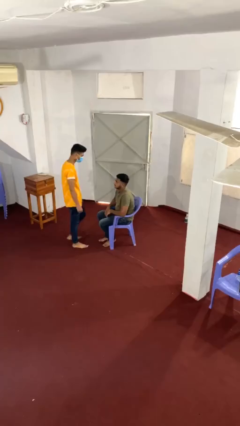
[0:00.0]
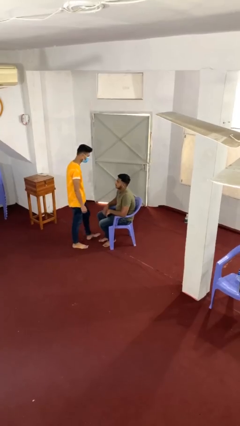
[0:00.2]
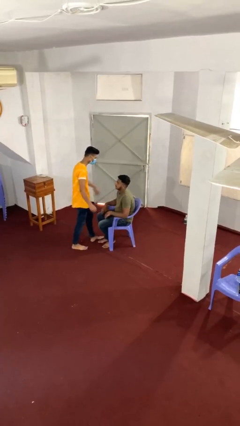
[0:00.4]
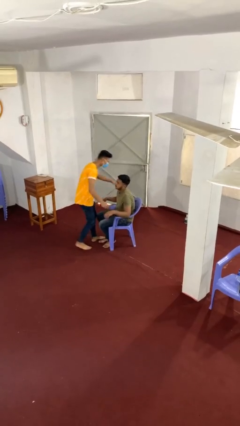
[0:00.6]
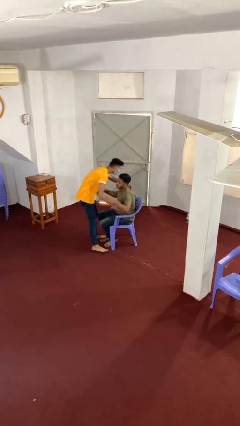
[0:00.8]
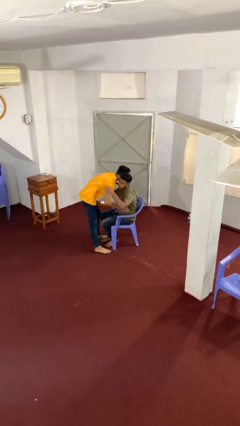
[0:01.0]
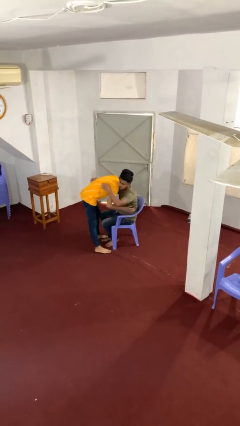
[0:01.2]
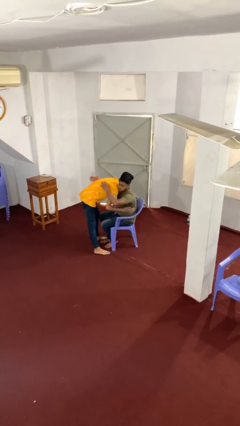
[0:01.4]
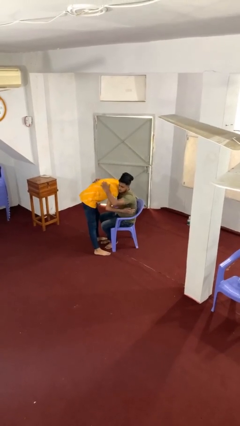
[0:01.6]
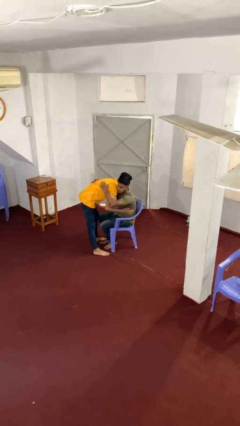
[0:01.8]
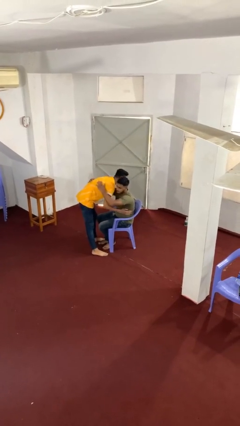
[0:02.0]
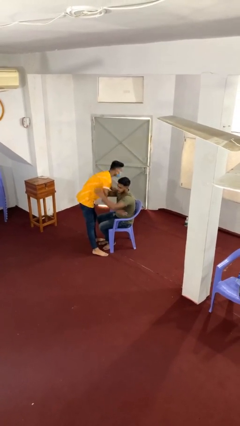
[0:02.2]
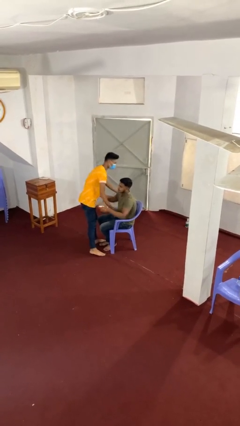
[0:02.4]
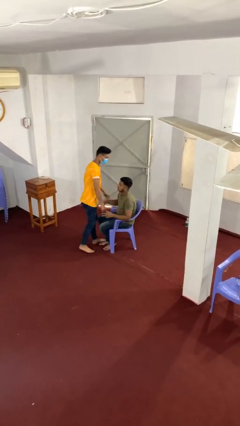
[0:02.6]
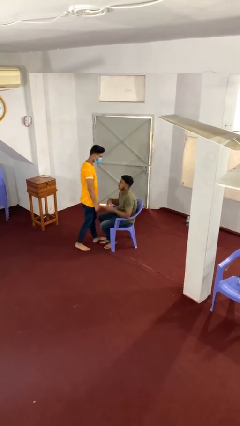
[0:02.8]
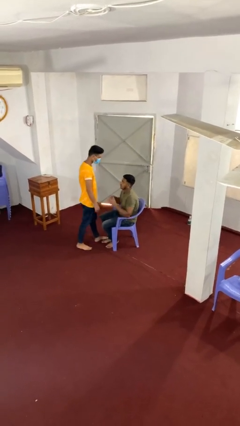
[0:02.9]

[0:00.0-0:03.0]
person embraces person

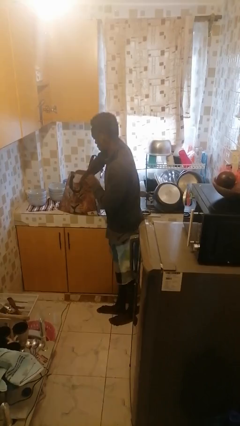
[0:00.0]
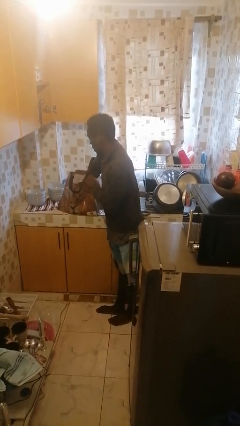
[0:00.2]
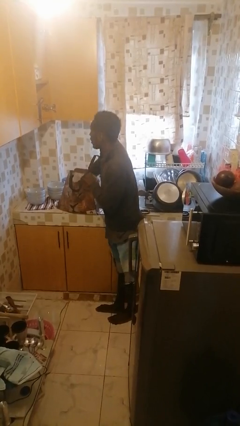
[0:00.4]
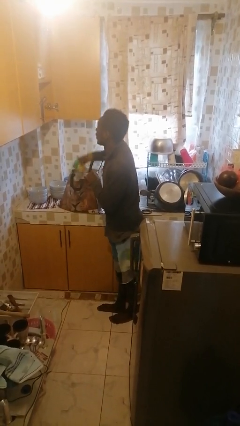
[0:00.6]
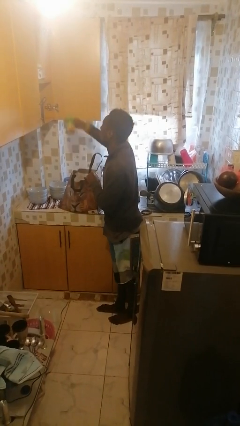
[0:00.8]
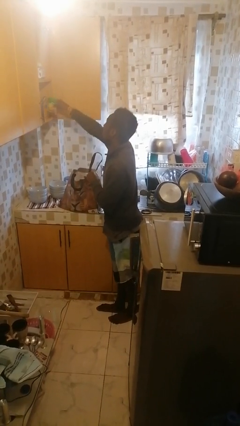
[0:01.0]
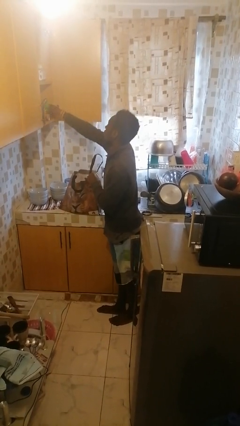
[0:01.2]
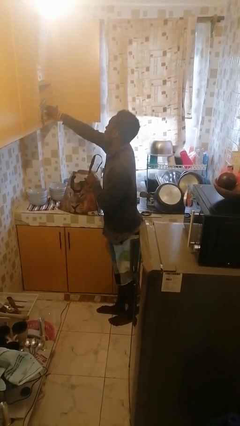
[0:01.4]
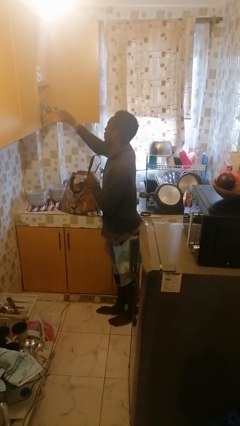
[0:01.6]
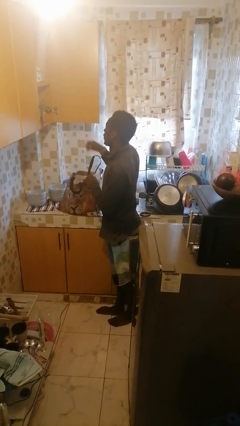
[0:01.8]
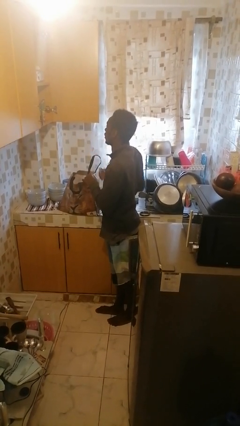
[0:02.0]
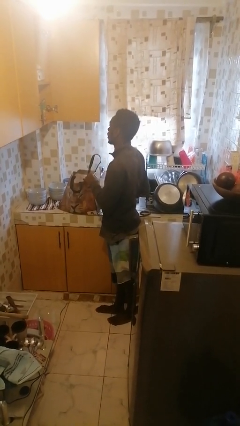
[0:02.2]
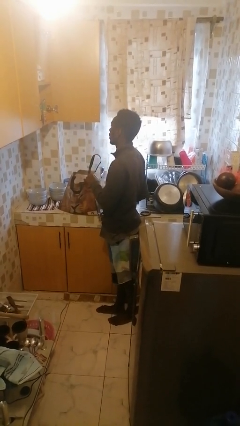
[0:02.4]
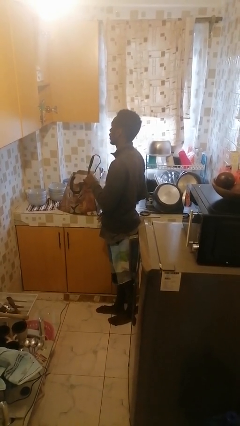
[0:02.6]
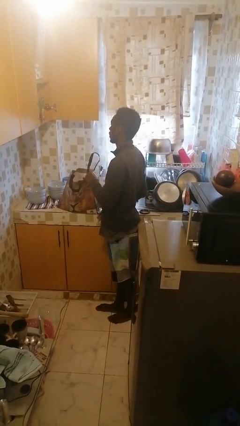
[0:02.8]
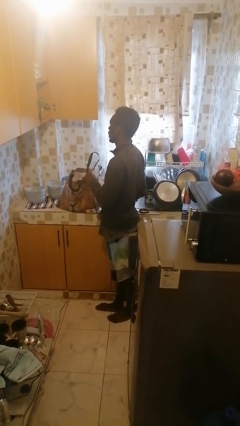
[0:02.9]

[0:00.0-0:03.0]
person loads groceries into cabinet

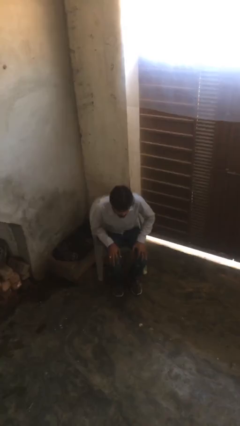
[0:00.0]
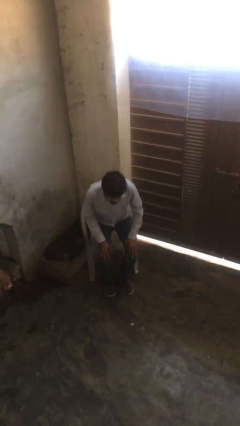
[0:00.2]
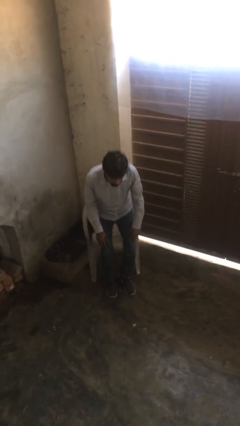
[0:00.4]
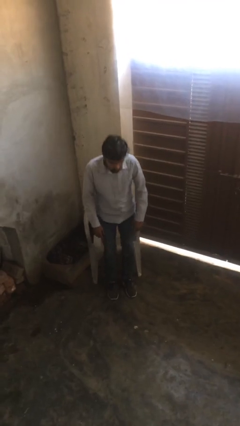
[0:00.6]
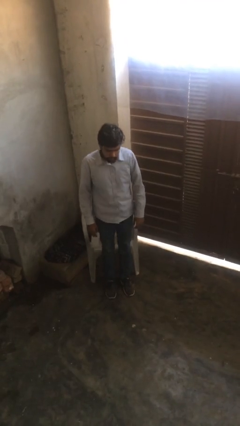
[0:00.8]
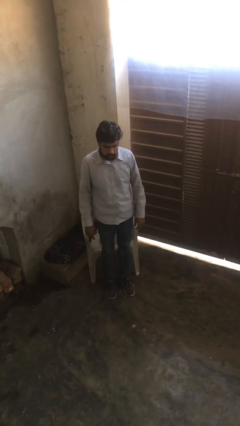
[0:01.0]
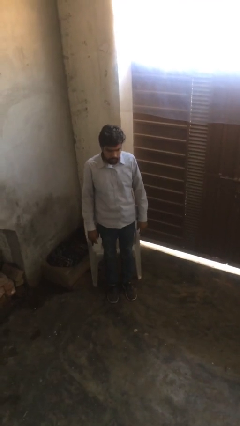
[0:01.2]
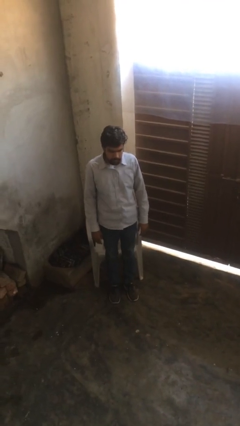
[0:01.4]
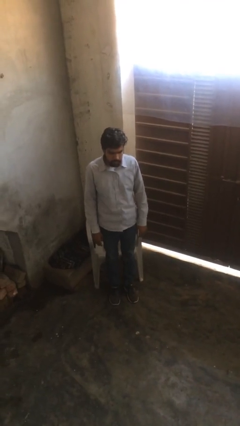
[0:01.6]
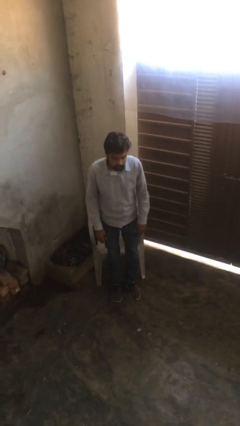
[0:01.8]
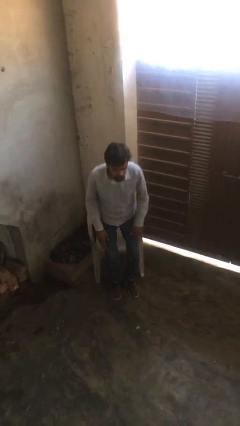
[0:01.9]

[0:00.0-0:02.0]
person stands up

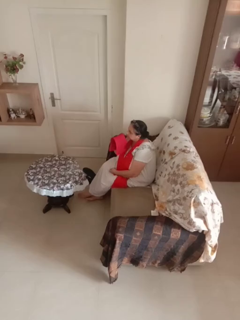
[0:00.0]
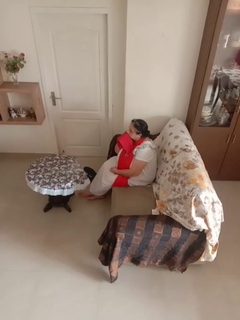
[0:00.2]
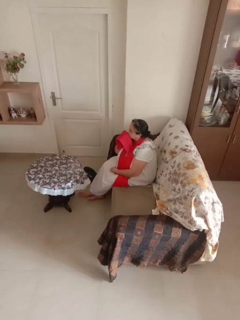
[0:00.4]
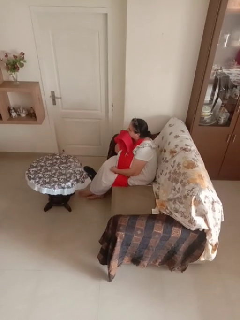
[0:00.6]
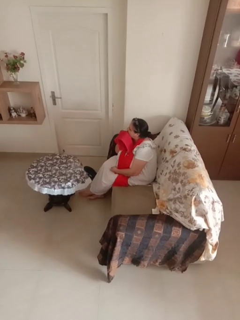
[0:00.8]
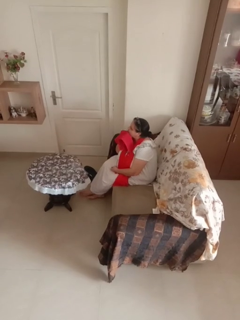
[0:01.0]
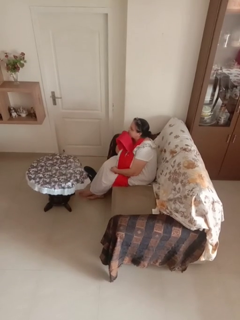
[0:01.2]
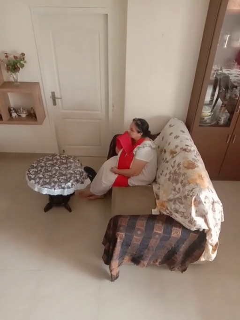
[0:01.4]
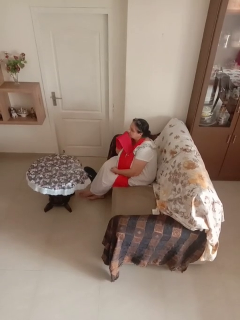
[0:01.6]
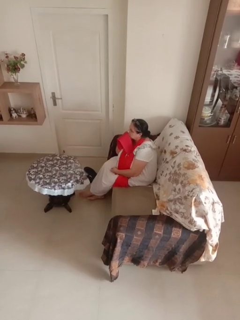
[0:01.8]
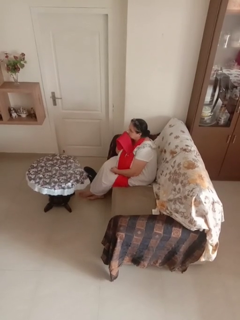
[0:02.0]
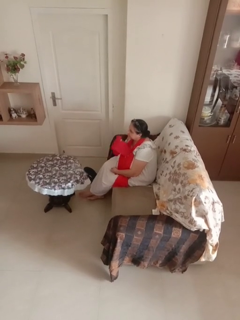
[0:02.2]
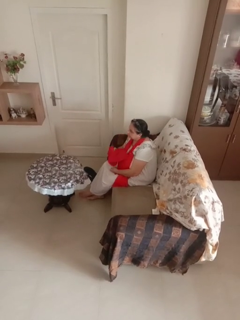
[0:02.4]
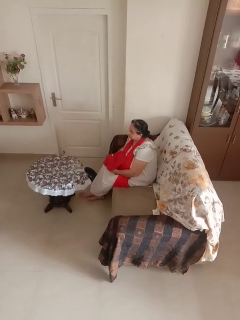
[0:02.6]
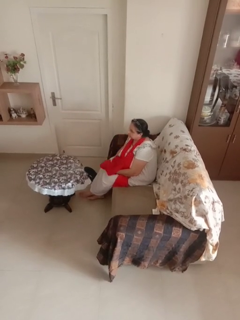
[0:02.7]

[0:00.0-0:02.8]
person wipes mouth with napkin

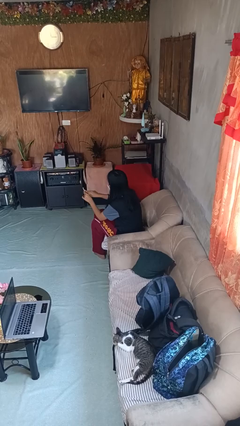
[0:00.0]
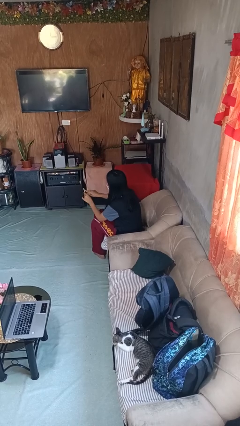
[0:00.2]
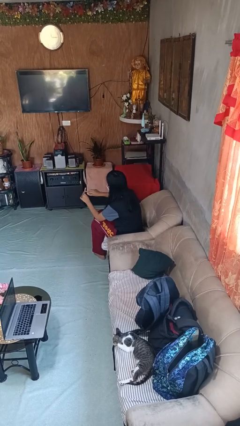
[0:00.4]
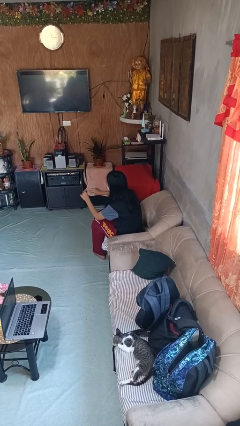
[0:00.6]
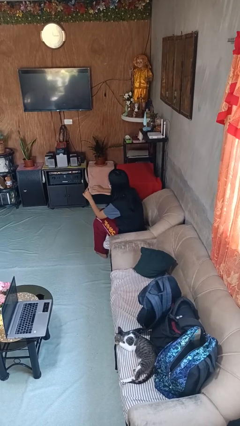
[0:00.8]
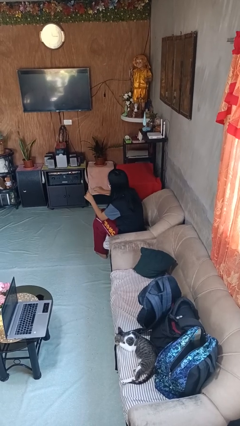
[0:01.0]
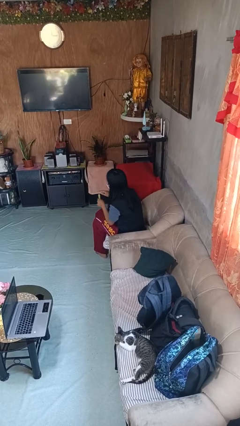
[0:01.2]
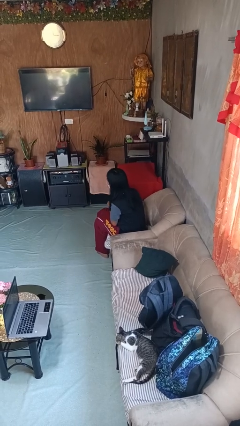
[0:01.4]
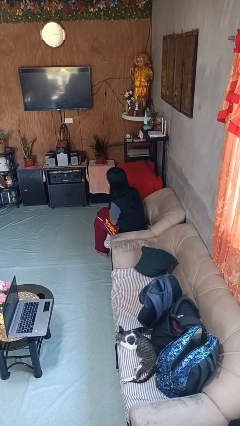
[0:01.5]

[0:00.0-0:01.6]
person files fingernails

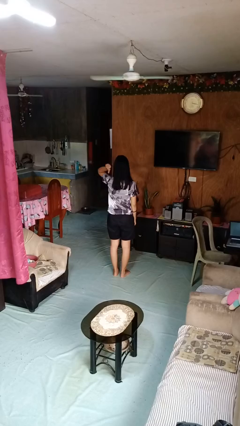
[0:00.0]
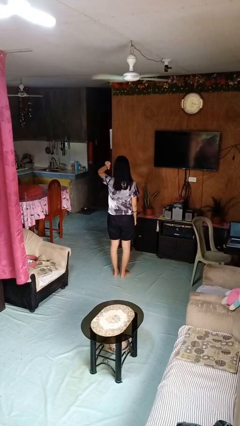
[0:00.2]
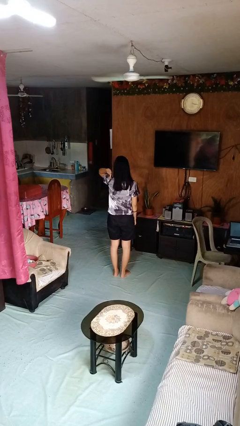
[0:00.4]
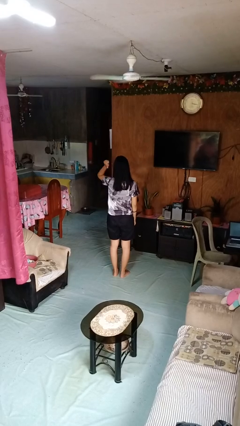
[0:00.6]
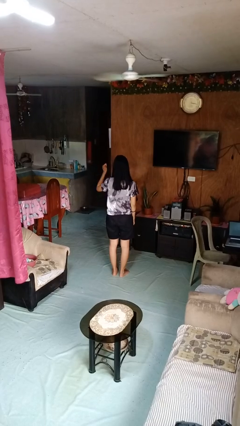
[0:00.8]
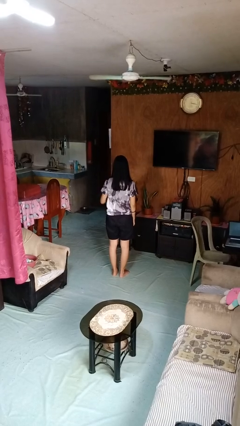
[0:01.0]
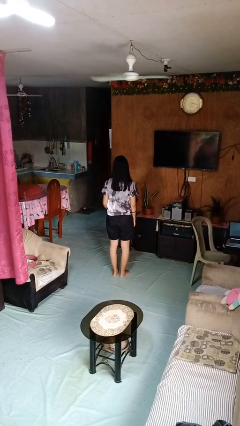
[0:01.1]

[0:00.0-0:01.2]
person gestures behind me

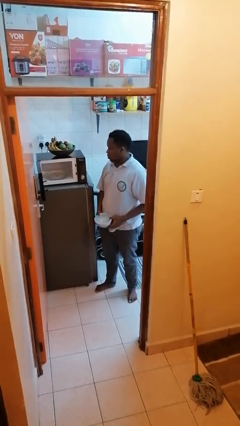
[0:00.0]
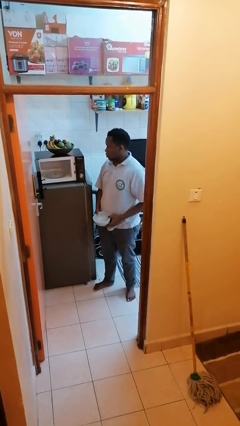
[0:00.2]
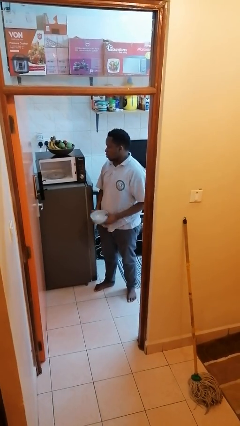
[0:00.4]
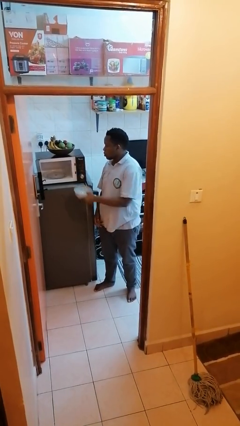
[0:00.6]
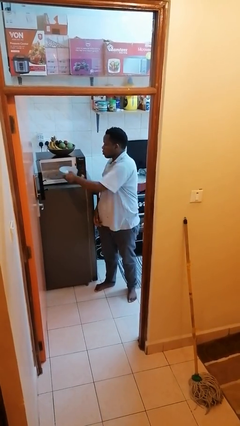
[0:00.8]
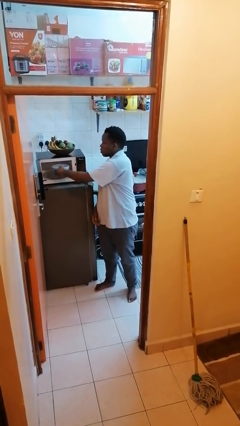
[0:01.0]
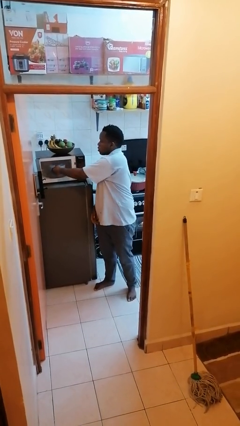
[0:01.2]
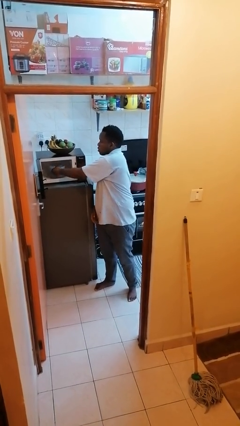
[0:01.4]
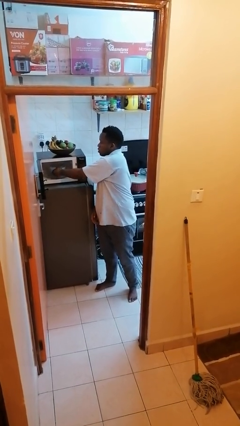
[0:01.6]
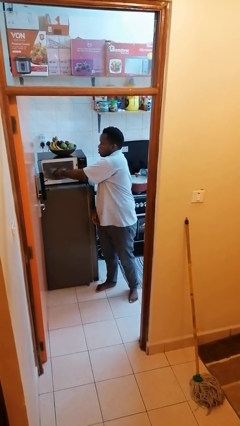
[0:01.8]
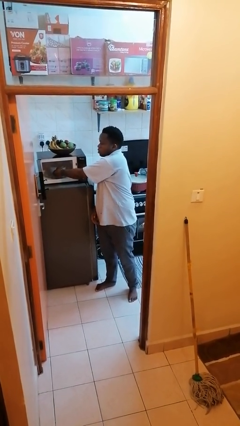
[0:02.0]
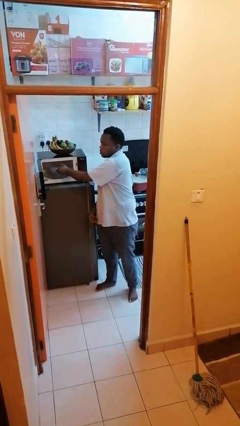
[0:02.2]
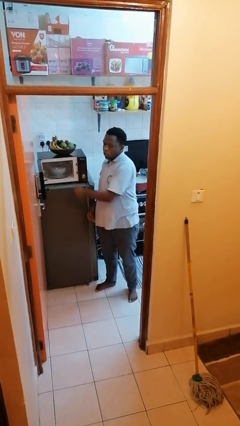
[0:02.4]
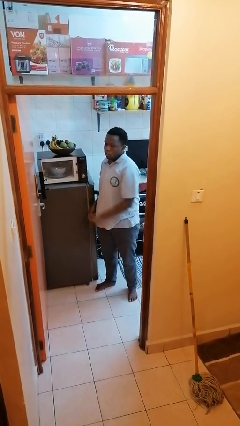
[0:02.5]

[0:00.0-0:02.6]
person puts object into microwave

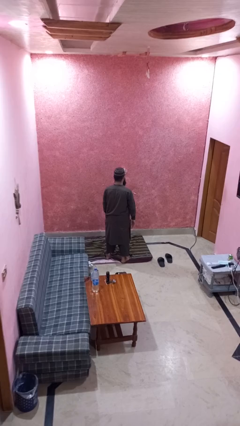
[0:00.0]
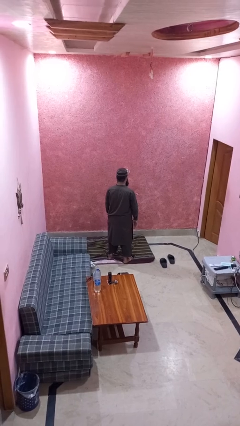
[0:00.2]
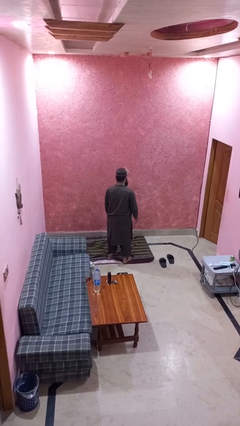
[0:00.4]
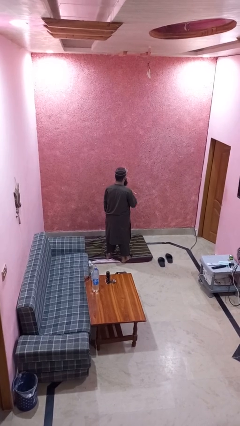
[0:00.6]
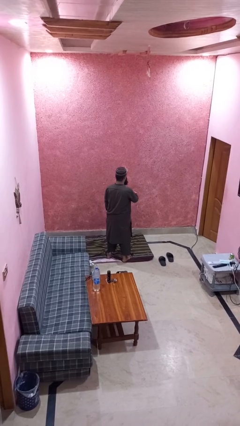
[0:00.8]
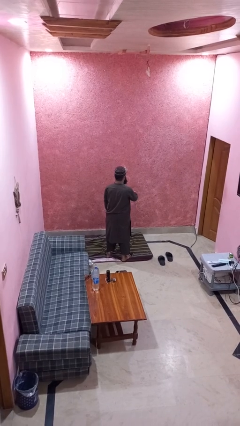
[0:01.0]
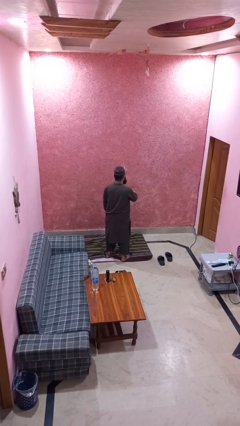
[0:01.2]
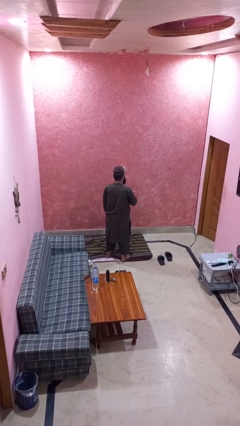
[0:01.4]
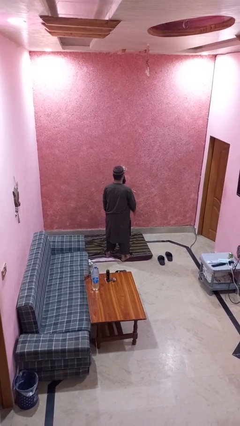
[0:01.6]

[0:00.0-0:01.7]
person drums on chest
